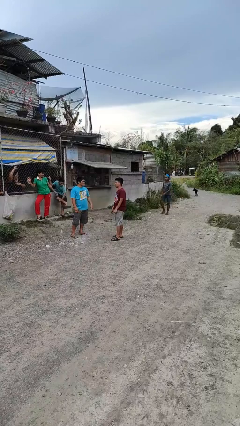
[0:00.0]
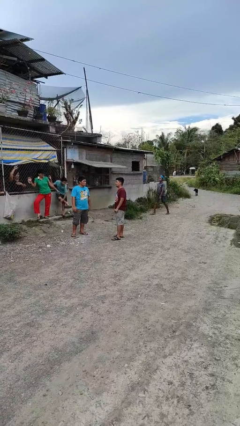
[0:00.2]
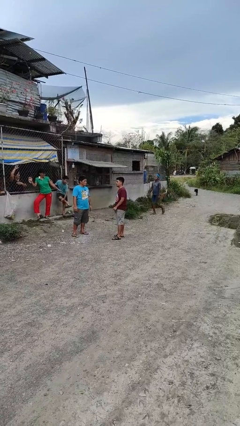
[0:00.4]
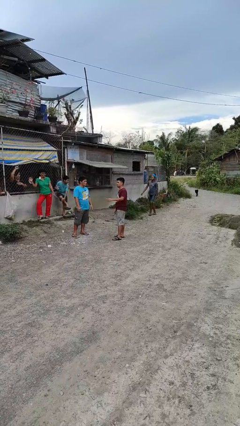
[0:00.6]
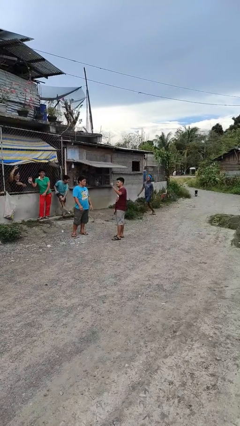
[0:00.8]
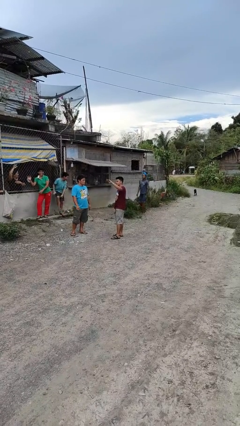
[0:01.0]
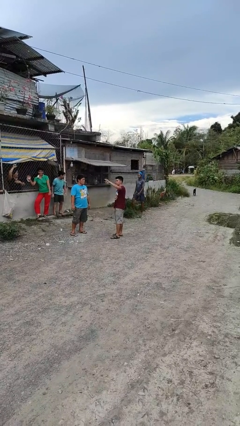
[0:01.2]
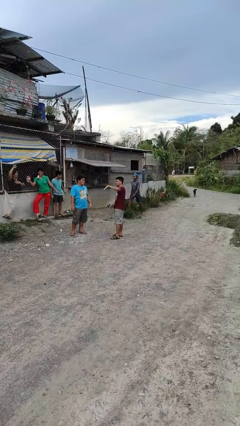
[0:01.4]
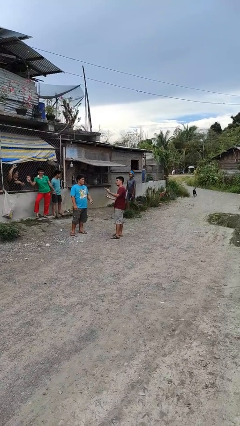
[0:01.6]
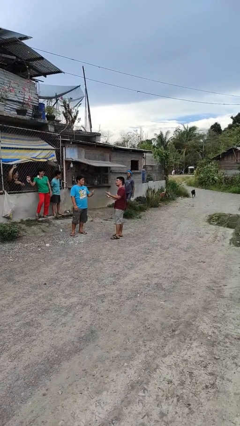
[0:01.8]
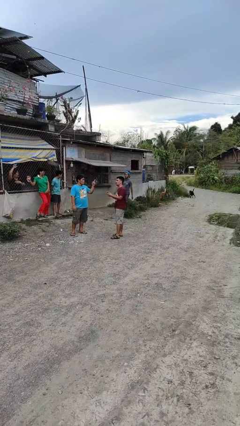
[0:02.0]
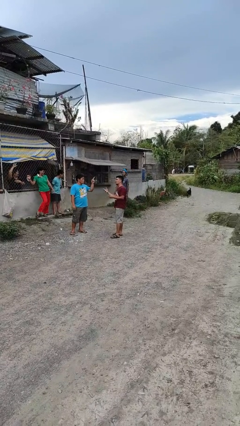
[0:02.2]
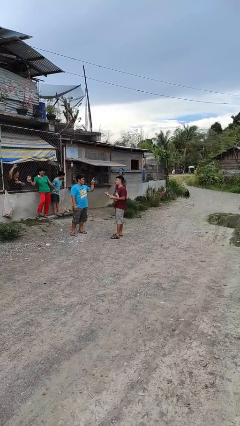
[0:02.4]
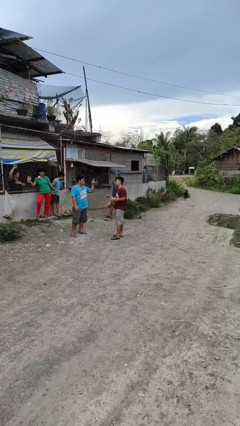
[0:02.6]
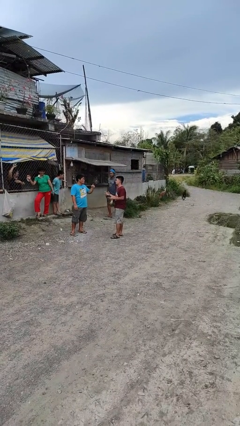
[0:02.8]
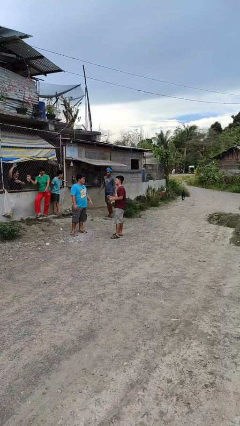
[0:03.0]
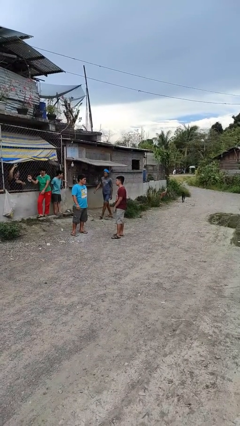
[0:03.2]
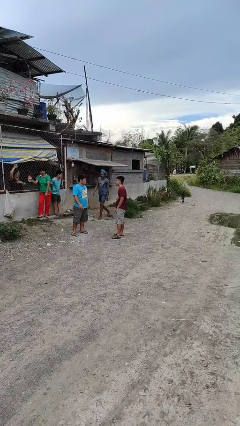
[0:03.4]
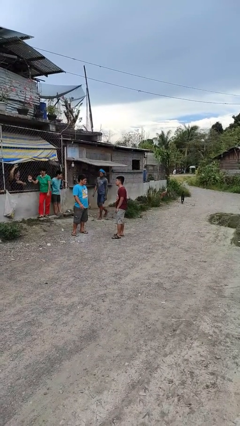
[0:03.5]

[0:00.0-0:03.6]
person talks to person

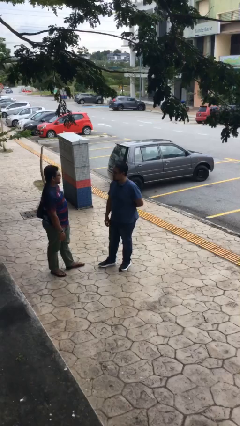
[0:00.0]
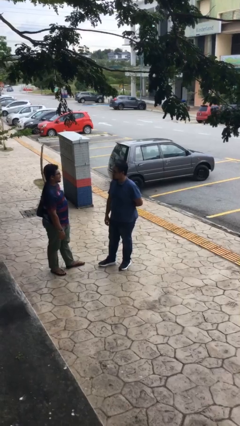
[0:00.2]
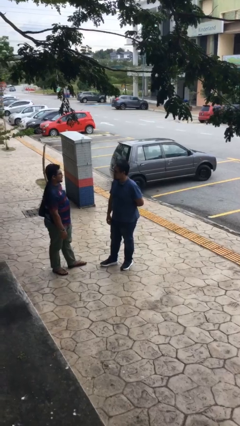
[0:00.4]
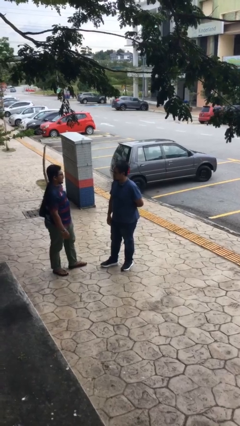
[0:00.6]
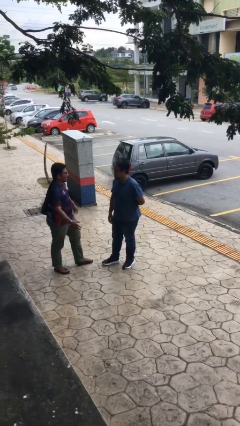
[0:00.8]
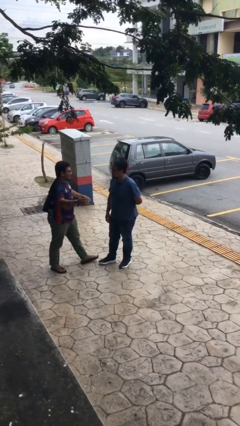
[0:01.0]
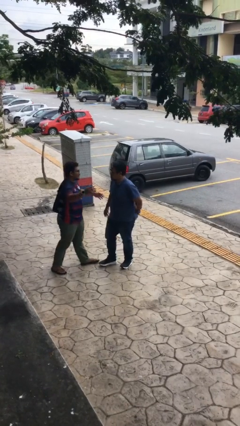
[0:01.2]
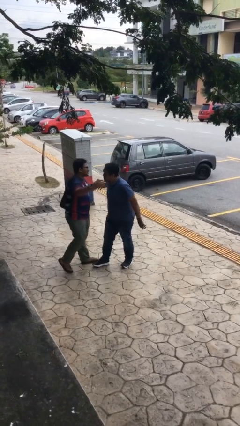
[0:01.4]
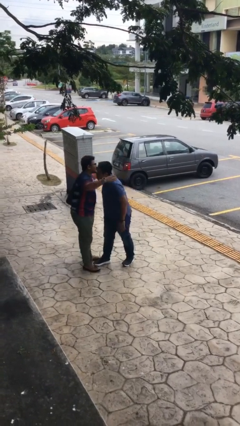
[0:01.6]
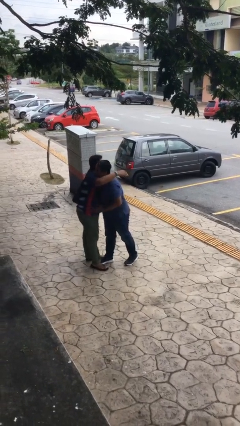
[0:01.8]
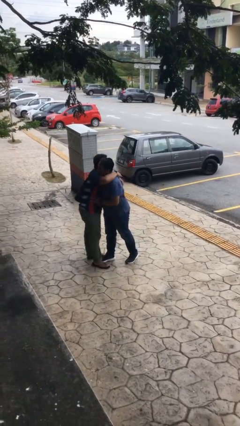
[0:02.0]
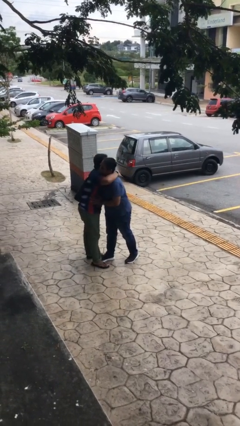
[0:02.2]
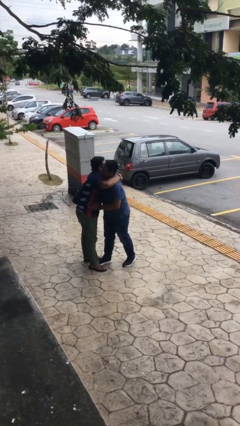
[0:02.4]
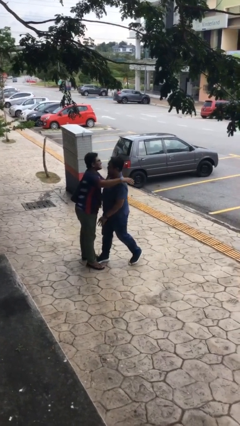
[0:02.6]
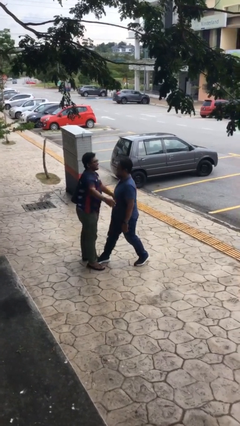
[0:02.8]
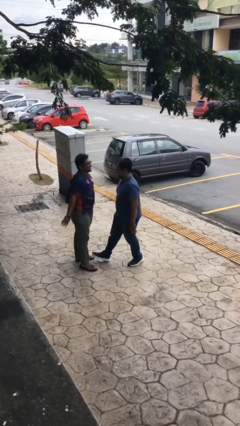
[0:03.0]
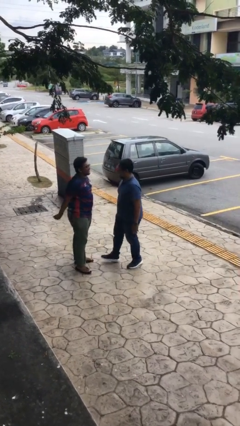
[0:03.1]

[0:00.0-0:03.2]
person embraces person

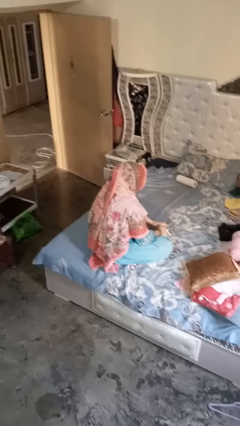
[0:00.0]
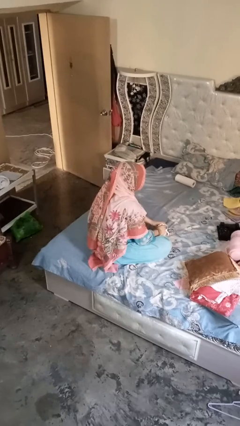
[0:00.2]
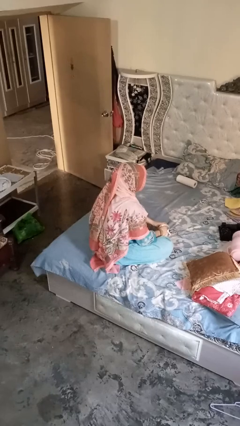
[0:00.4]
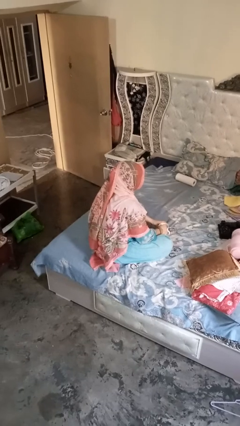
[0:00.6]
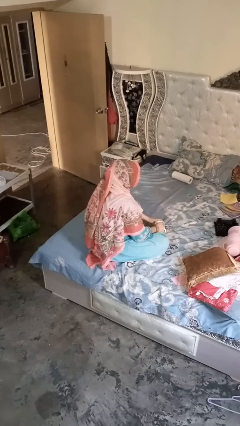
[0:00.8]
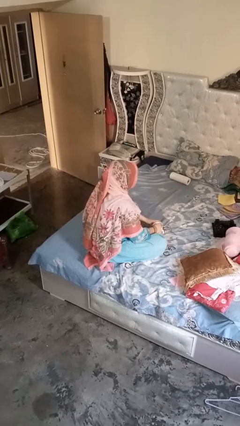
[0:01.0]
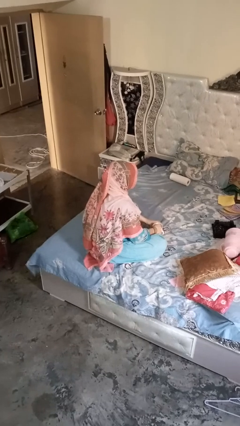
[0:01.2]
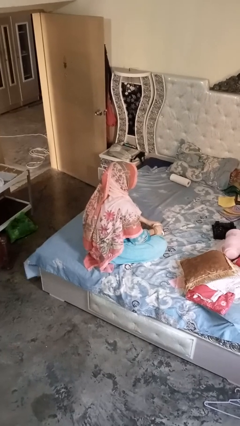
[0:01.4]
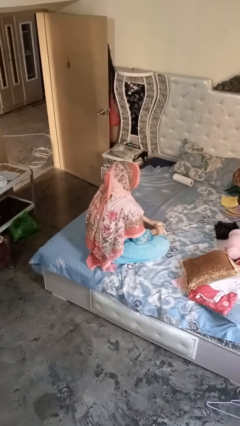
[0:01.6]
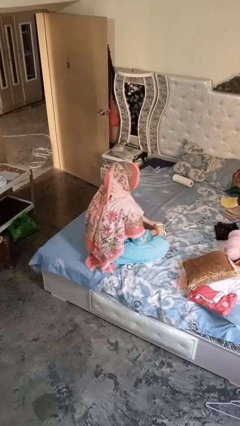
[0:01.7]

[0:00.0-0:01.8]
person stirs mug

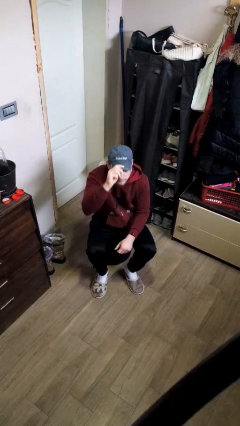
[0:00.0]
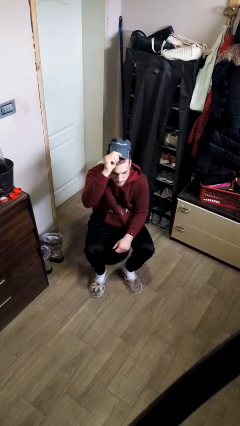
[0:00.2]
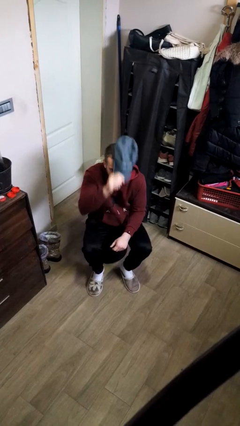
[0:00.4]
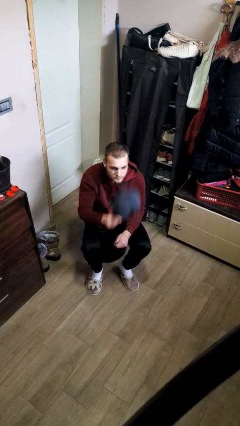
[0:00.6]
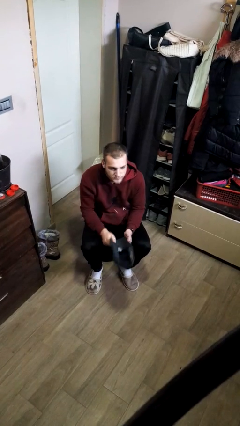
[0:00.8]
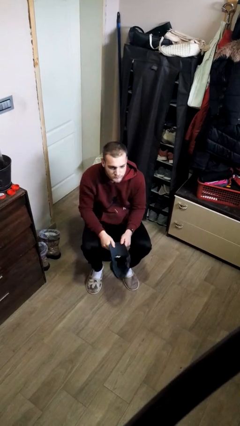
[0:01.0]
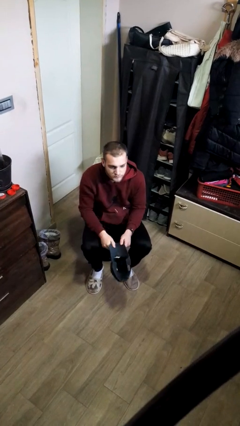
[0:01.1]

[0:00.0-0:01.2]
person takes off hat

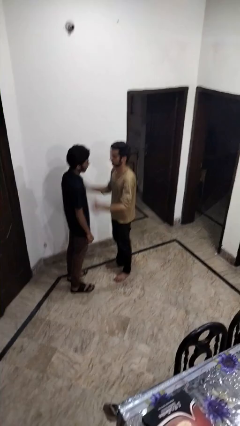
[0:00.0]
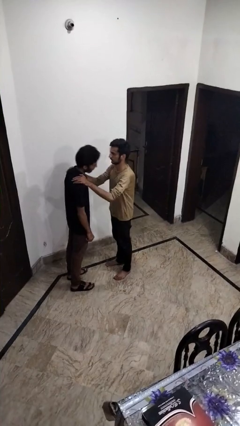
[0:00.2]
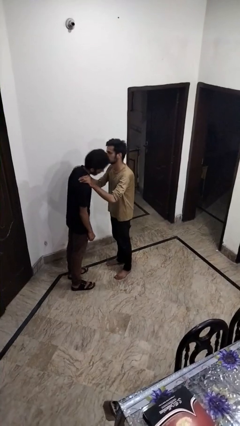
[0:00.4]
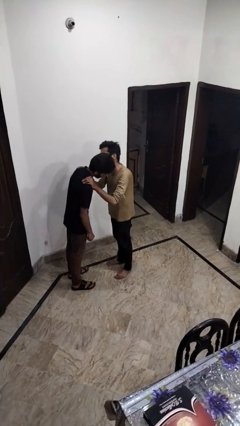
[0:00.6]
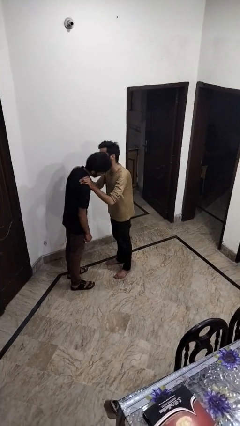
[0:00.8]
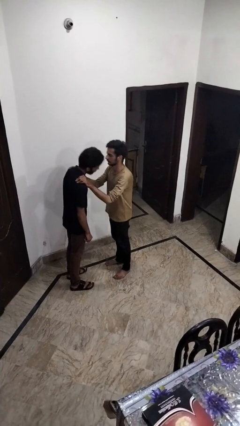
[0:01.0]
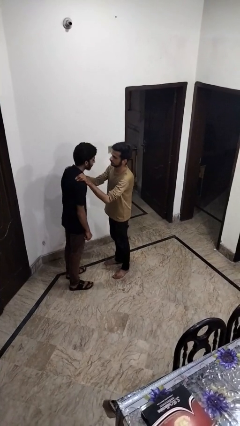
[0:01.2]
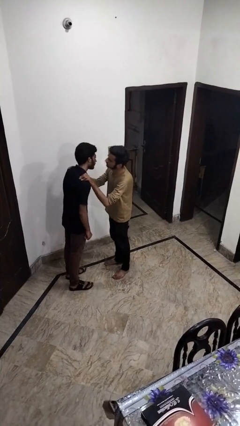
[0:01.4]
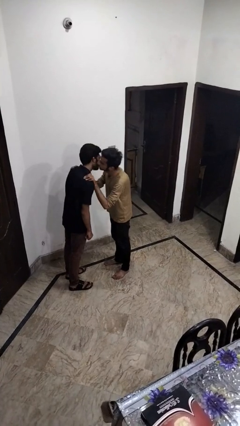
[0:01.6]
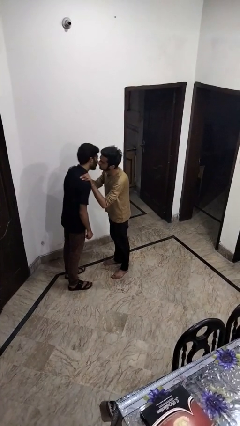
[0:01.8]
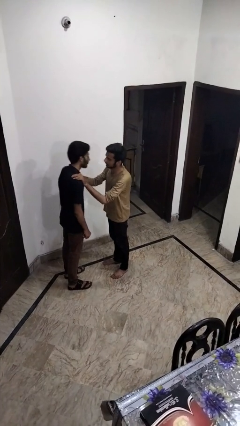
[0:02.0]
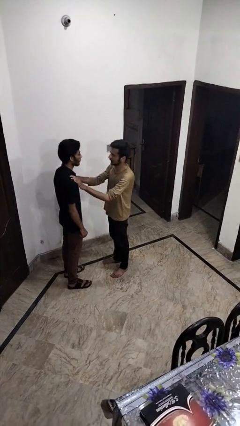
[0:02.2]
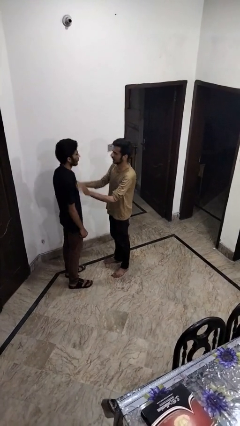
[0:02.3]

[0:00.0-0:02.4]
person kisses cheek of person

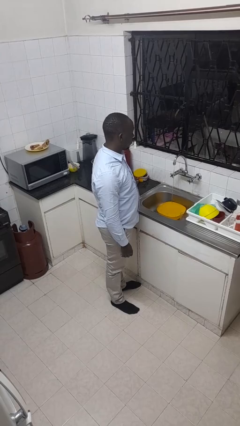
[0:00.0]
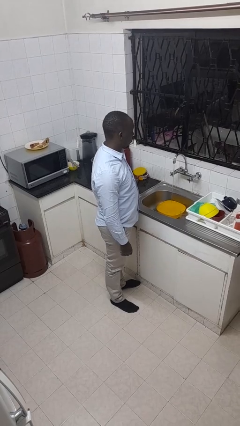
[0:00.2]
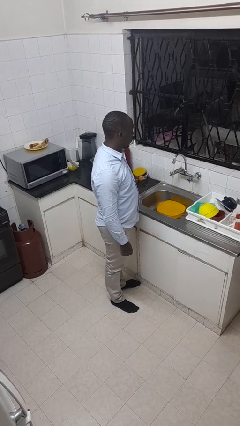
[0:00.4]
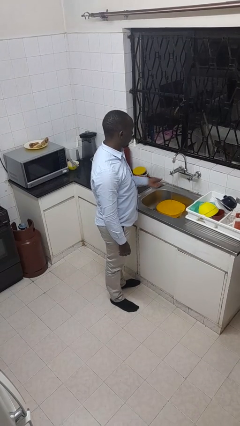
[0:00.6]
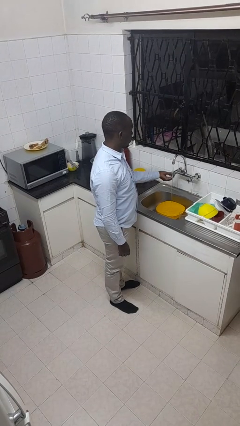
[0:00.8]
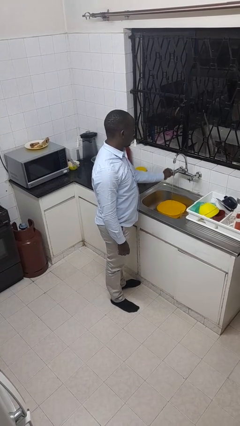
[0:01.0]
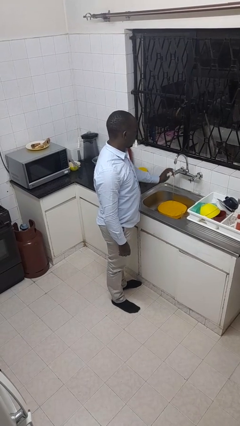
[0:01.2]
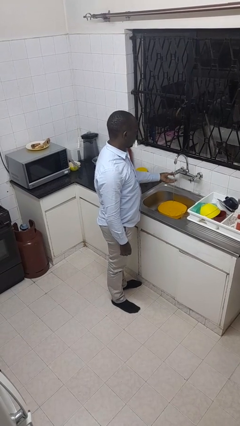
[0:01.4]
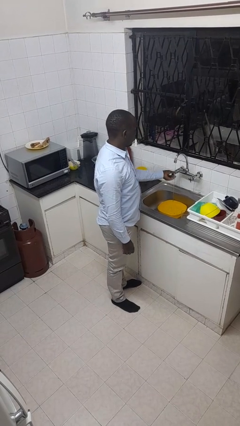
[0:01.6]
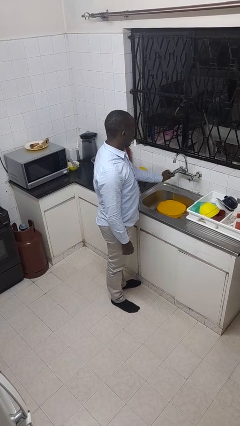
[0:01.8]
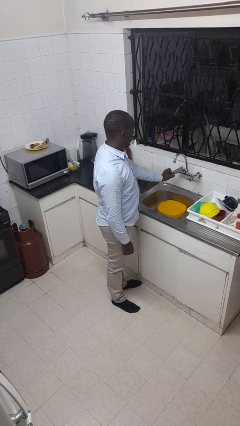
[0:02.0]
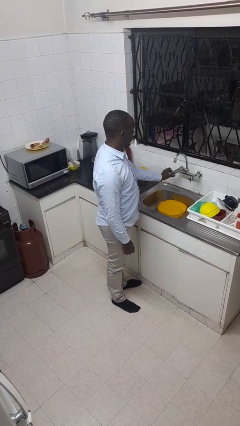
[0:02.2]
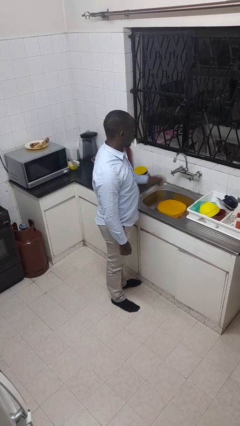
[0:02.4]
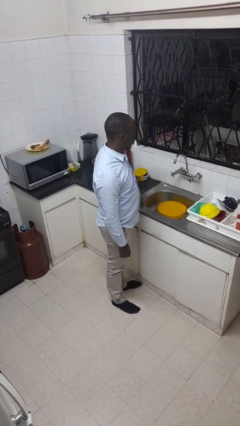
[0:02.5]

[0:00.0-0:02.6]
person turns off faucet

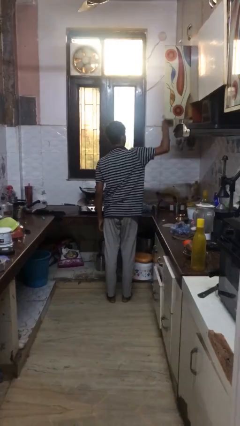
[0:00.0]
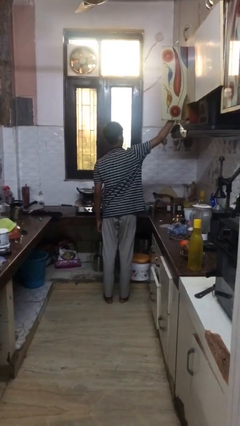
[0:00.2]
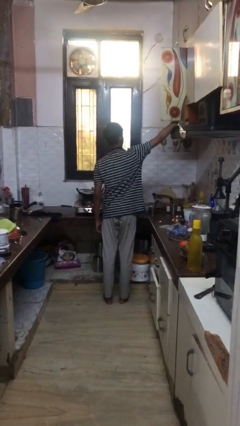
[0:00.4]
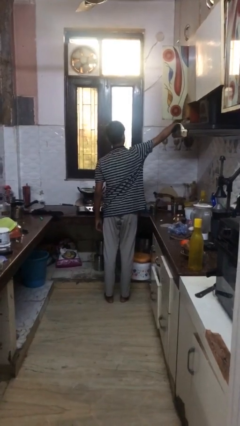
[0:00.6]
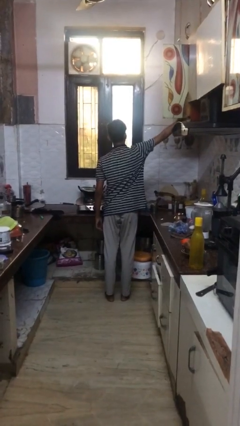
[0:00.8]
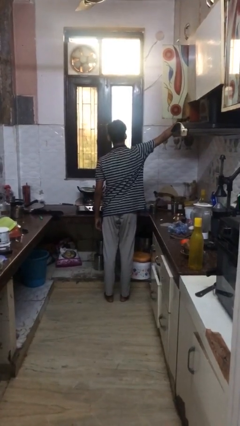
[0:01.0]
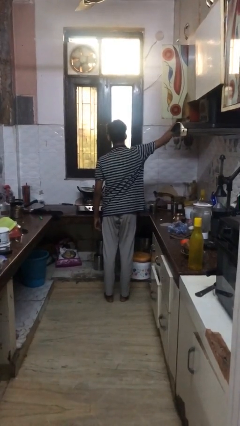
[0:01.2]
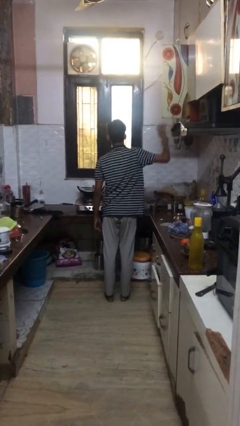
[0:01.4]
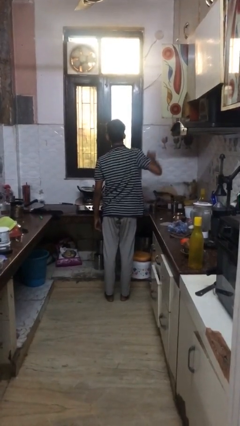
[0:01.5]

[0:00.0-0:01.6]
person takes object from cabinet

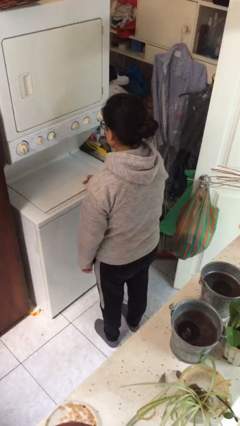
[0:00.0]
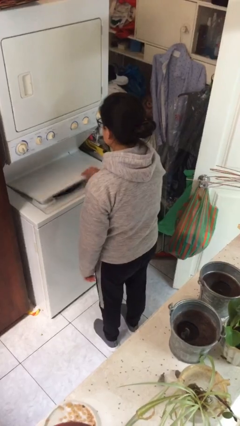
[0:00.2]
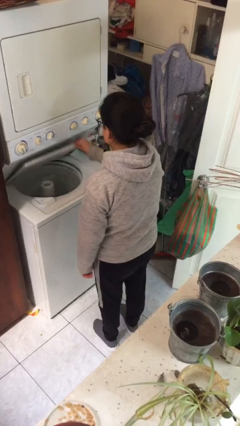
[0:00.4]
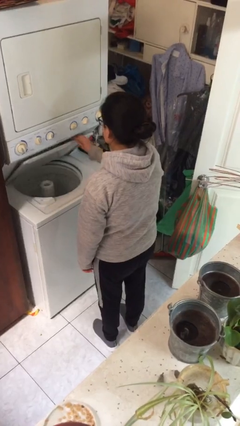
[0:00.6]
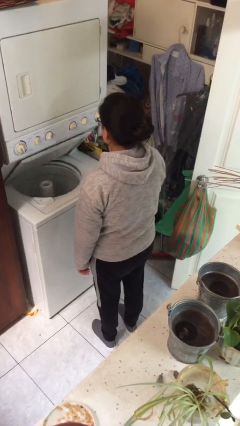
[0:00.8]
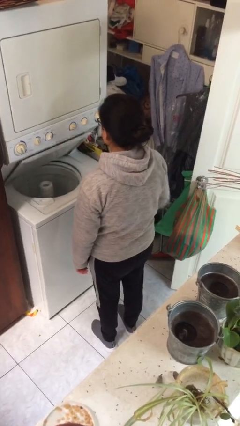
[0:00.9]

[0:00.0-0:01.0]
person opens clothes washer
